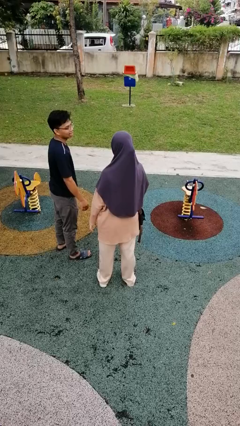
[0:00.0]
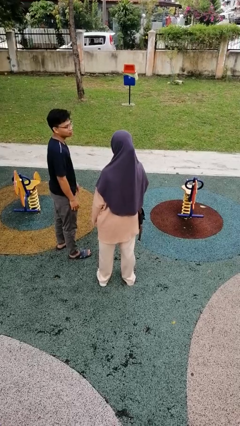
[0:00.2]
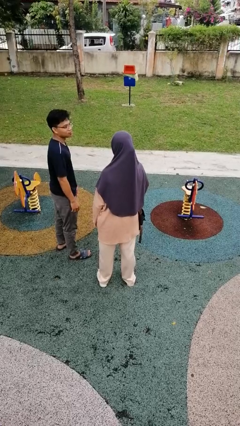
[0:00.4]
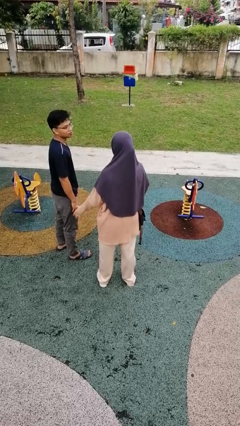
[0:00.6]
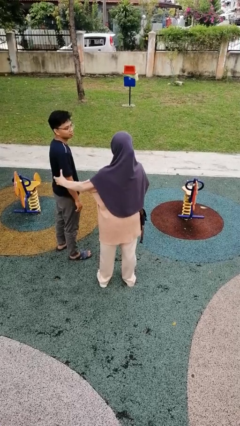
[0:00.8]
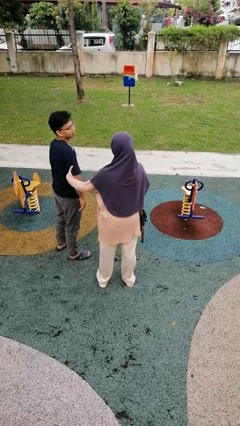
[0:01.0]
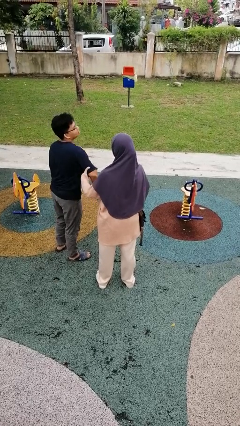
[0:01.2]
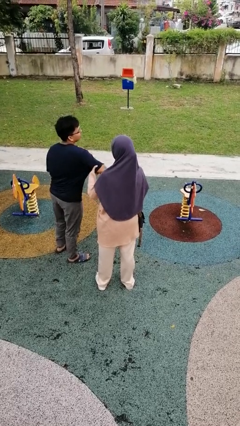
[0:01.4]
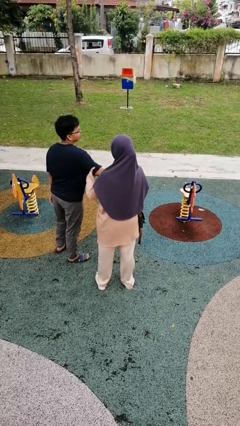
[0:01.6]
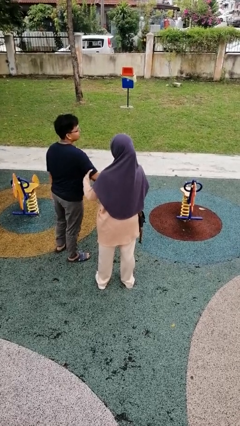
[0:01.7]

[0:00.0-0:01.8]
person grabs person by bicep

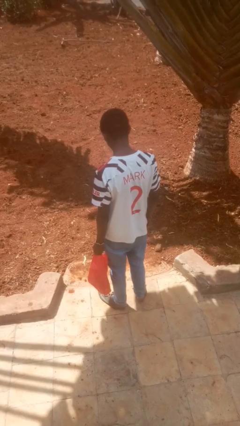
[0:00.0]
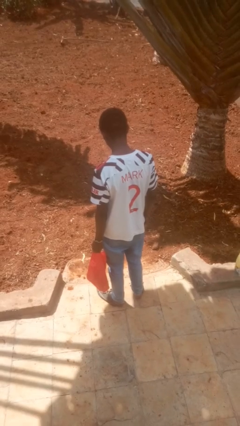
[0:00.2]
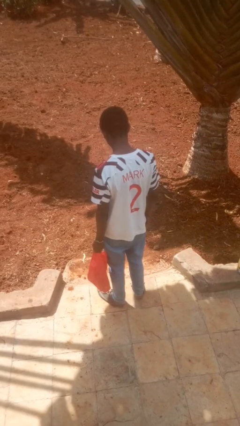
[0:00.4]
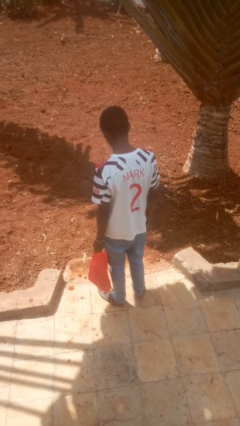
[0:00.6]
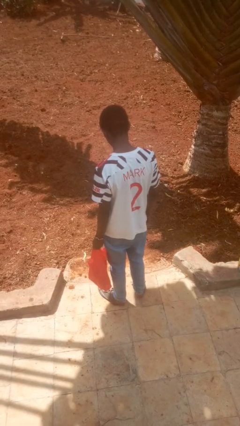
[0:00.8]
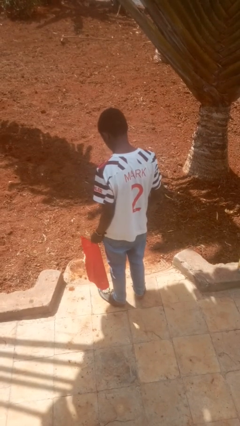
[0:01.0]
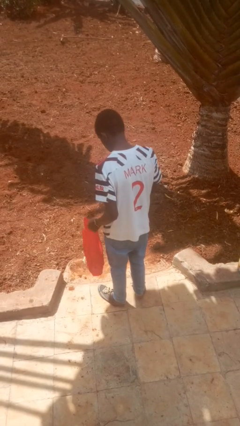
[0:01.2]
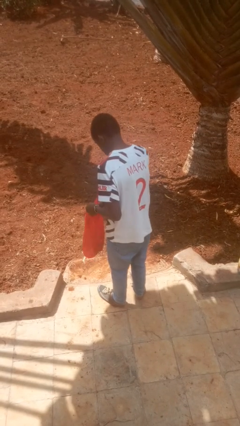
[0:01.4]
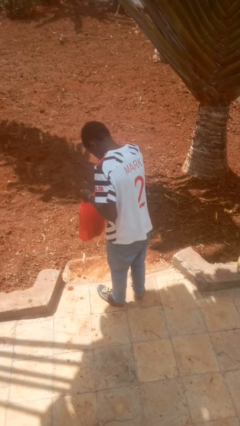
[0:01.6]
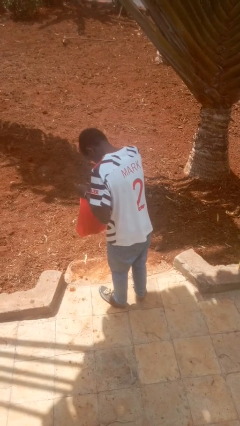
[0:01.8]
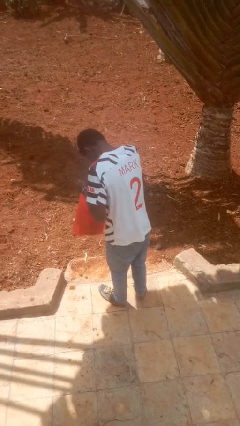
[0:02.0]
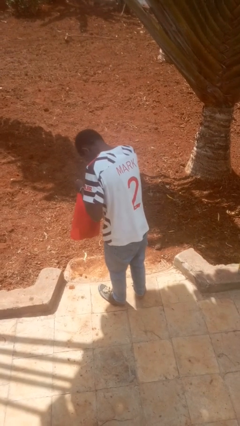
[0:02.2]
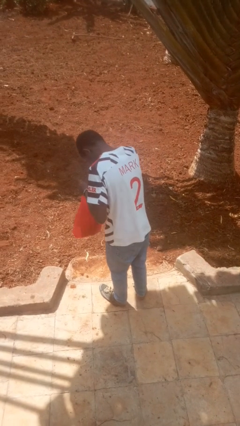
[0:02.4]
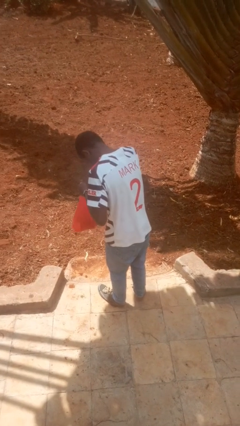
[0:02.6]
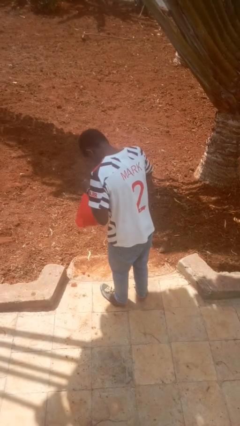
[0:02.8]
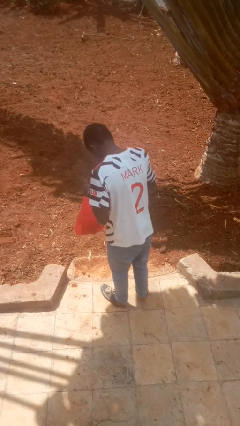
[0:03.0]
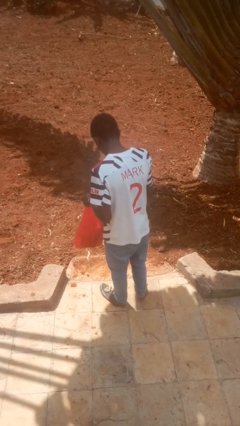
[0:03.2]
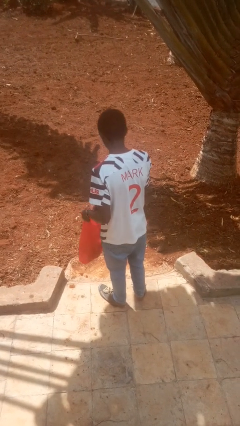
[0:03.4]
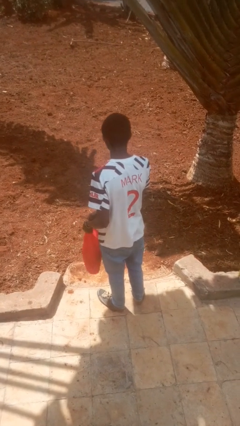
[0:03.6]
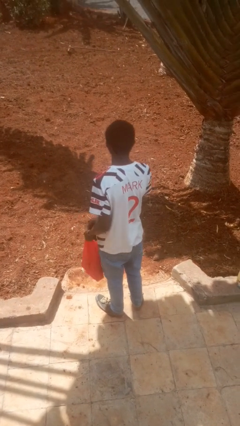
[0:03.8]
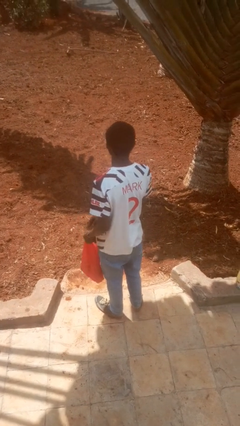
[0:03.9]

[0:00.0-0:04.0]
person searches in bag

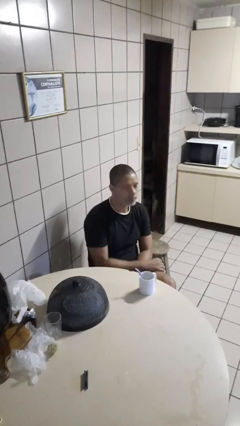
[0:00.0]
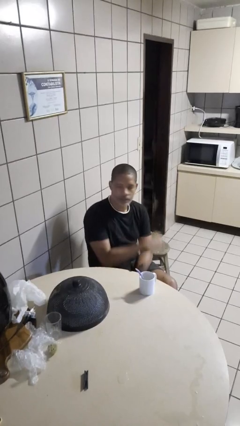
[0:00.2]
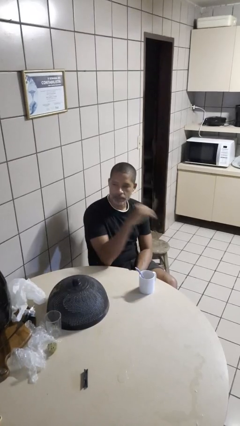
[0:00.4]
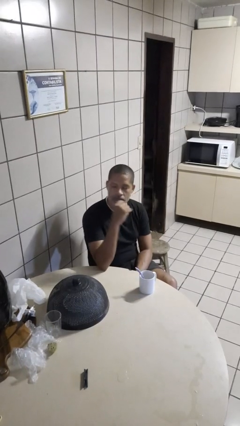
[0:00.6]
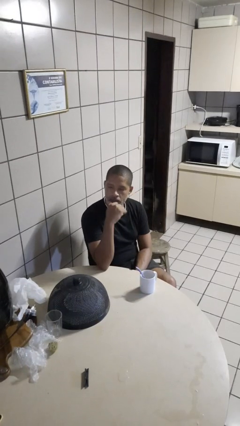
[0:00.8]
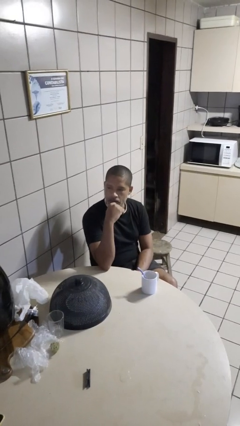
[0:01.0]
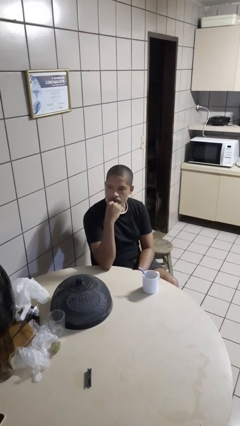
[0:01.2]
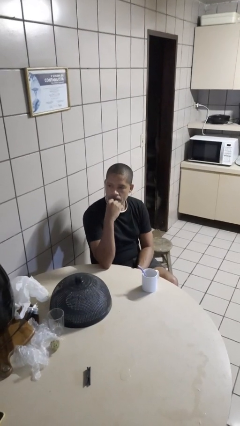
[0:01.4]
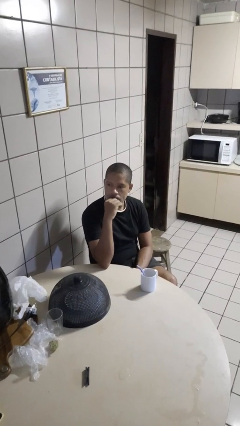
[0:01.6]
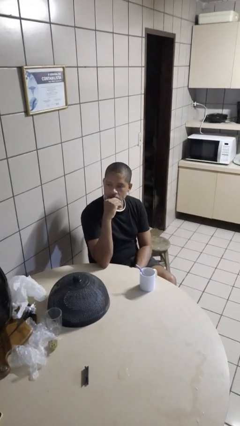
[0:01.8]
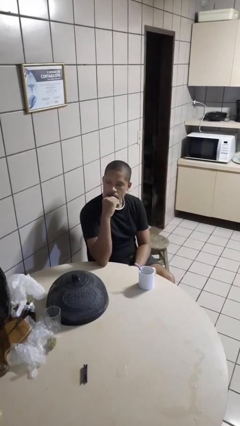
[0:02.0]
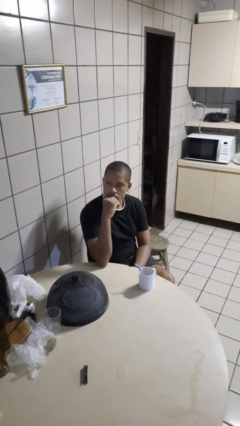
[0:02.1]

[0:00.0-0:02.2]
person strokes chin

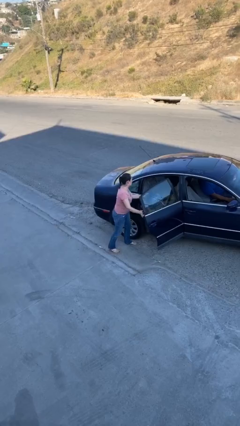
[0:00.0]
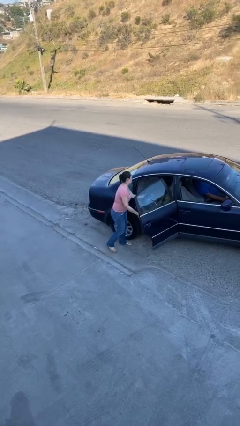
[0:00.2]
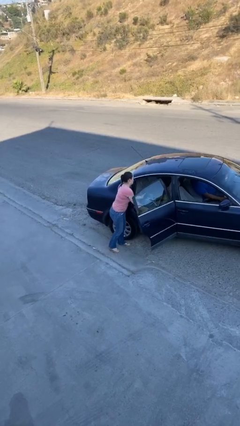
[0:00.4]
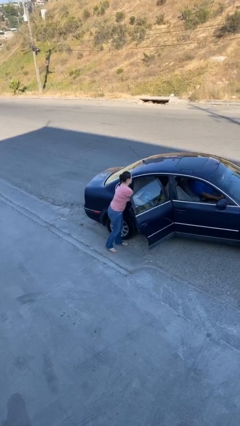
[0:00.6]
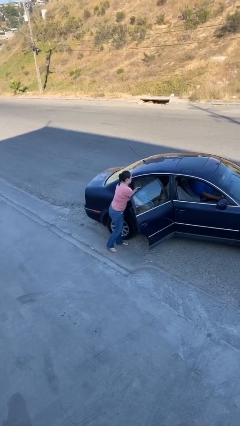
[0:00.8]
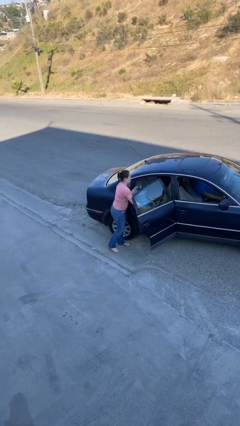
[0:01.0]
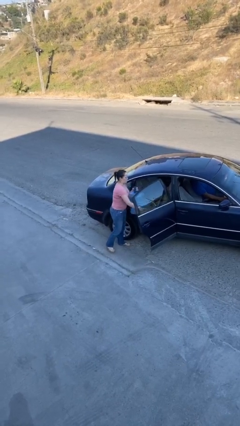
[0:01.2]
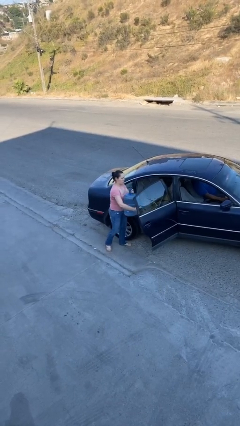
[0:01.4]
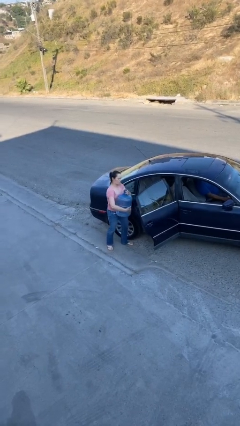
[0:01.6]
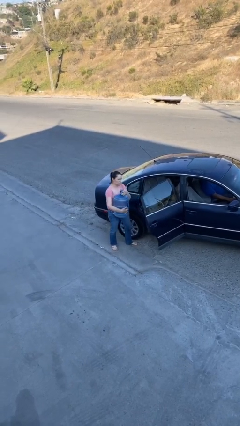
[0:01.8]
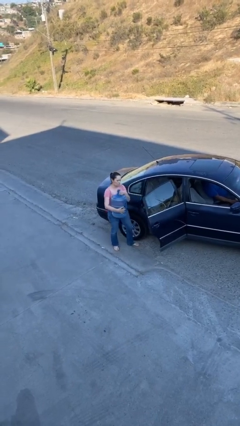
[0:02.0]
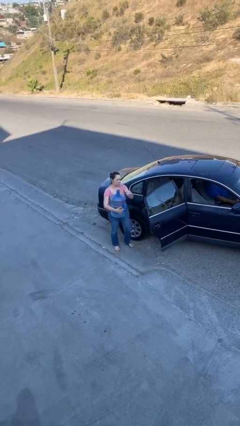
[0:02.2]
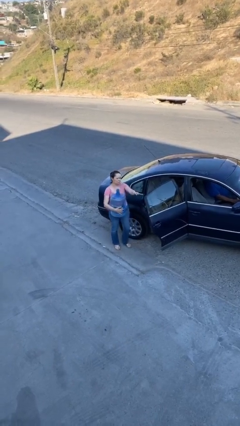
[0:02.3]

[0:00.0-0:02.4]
person unloads car

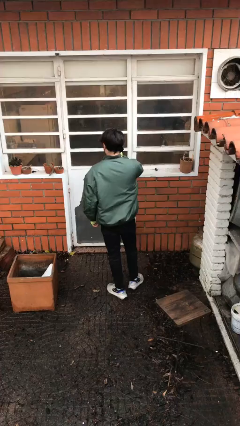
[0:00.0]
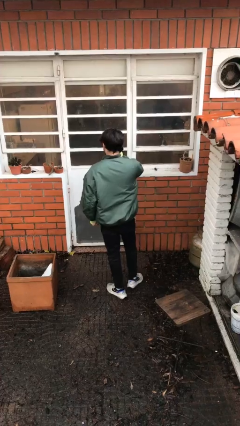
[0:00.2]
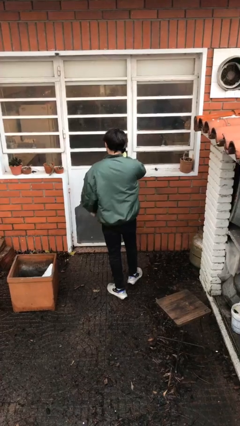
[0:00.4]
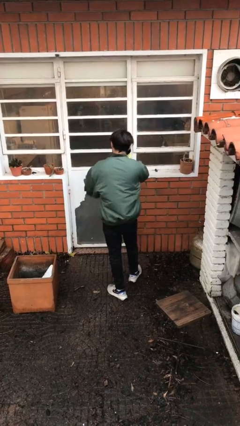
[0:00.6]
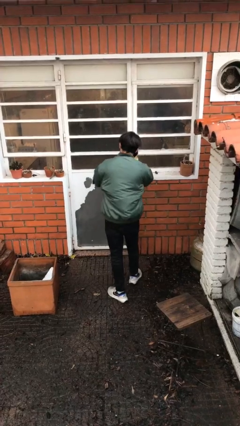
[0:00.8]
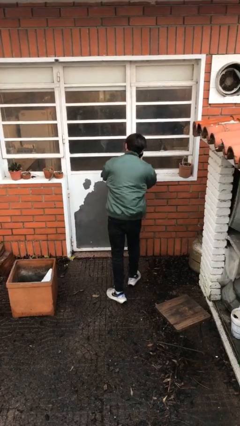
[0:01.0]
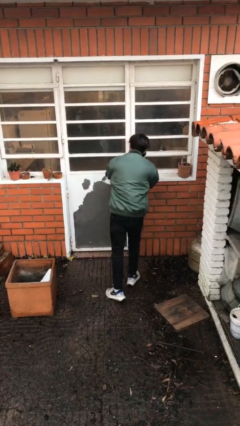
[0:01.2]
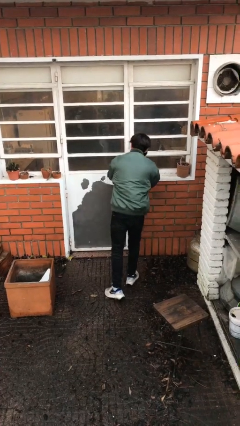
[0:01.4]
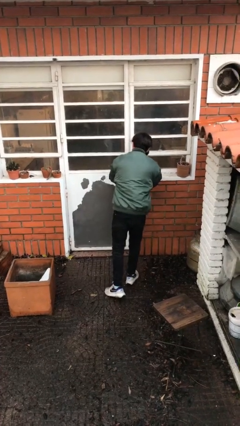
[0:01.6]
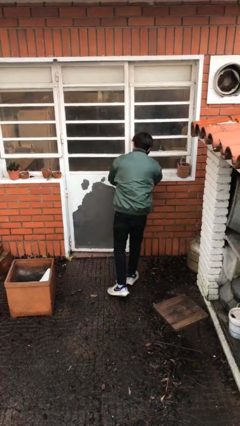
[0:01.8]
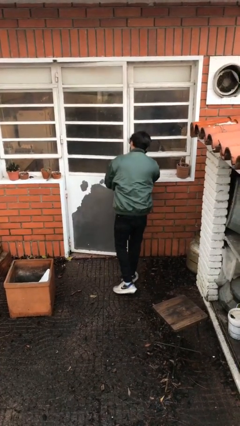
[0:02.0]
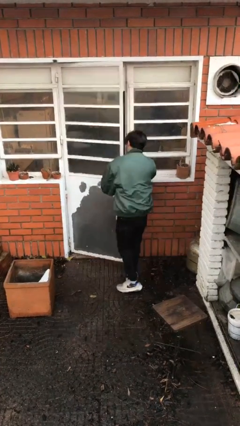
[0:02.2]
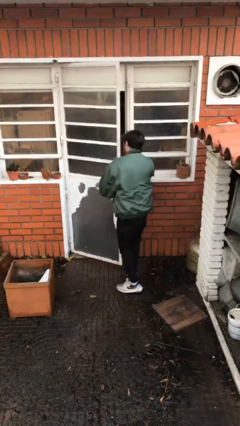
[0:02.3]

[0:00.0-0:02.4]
person opens facility door

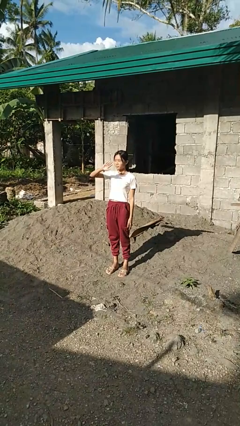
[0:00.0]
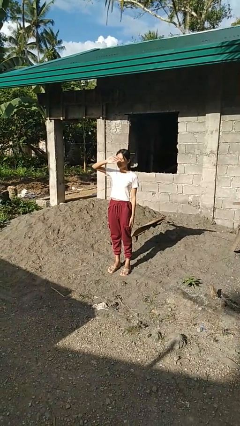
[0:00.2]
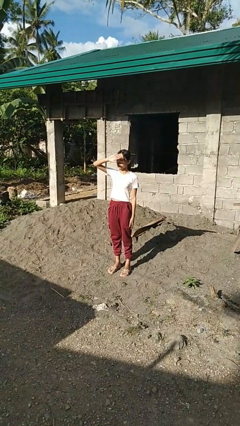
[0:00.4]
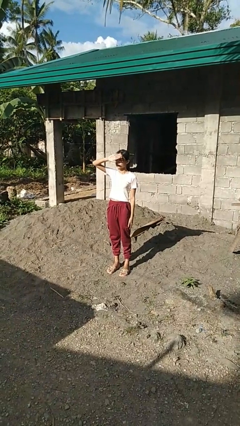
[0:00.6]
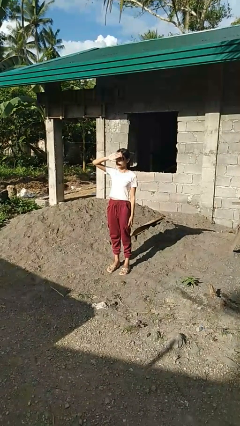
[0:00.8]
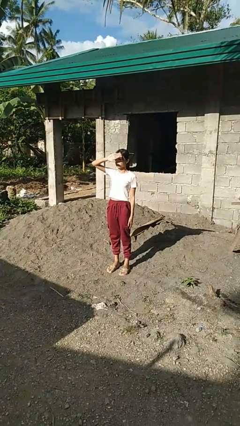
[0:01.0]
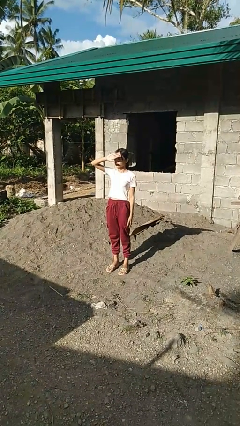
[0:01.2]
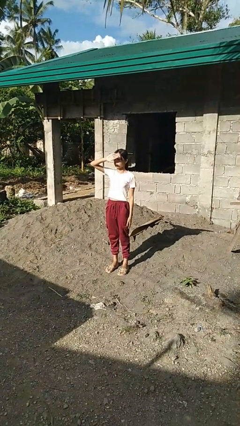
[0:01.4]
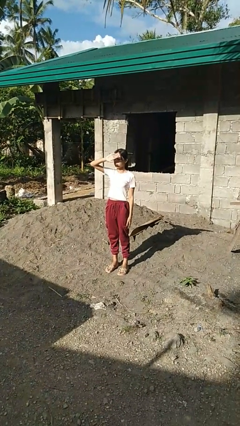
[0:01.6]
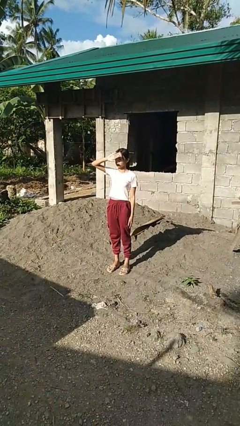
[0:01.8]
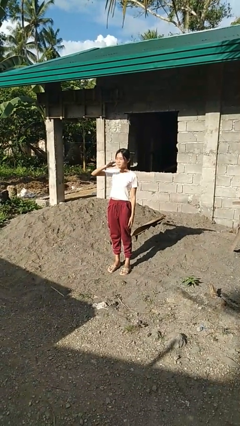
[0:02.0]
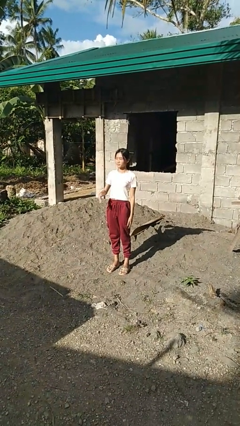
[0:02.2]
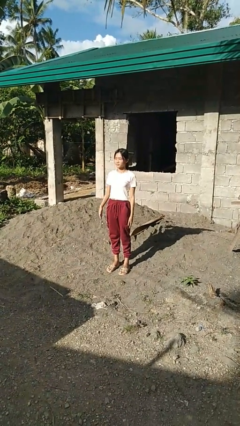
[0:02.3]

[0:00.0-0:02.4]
person shades eyes

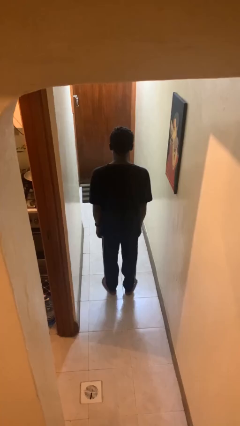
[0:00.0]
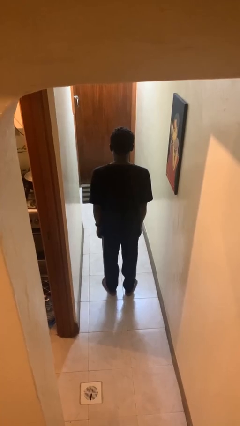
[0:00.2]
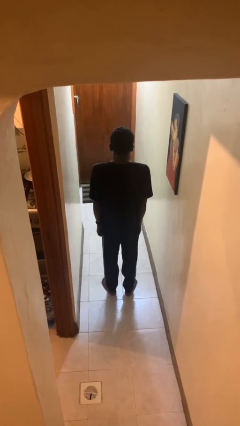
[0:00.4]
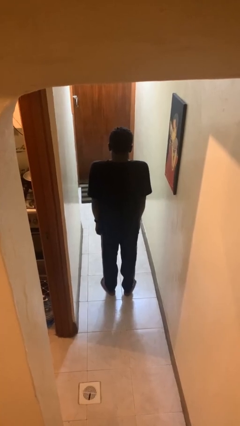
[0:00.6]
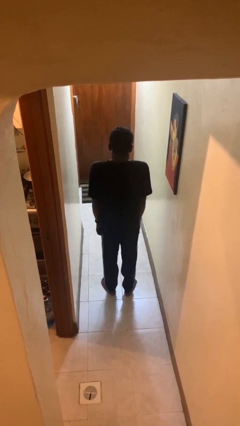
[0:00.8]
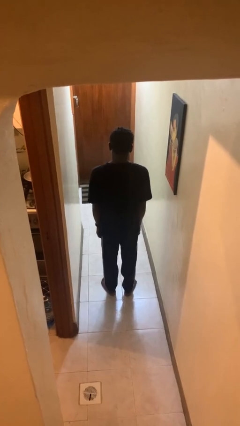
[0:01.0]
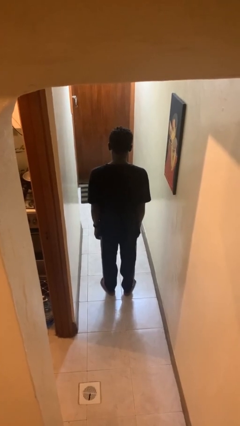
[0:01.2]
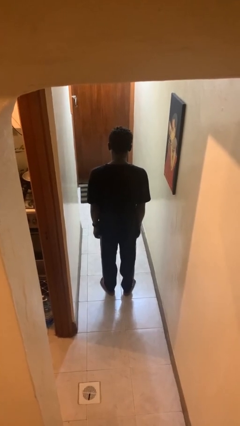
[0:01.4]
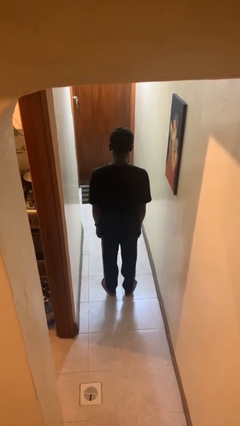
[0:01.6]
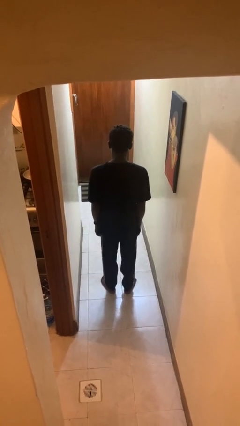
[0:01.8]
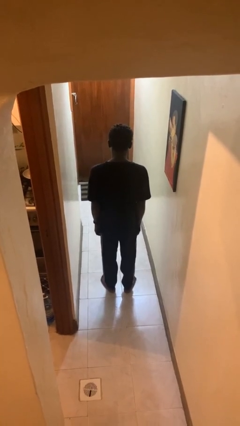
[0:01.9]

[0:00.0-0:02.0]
person shrugs
